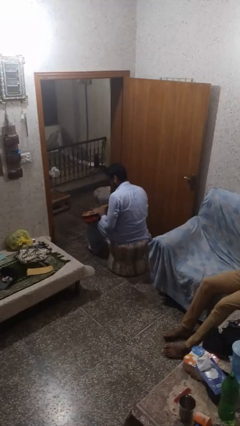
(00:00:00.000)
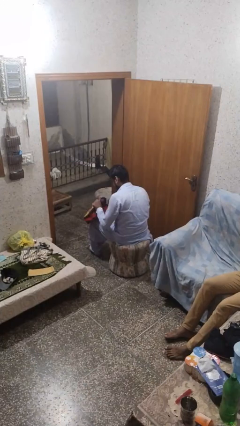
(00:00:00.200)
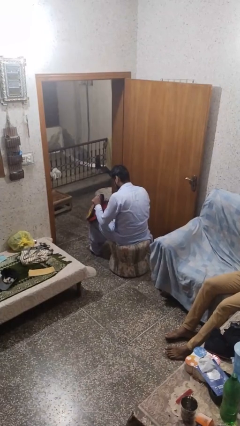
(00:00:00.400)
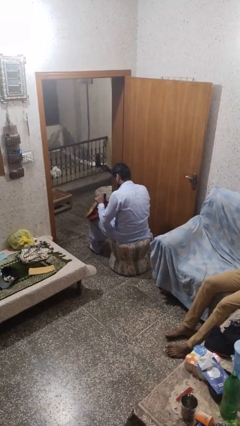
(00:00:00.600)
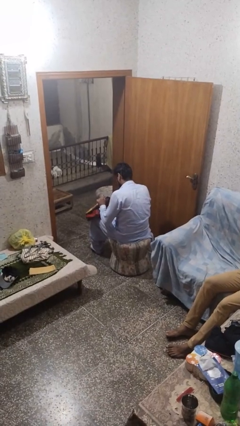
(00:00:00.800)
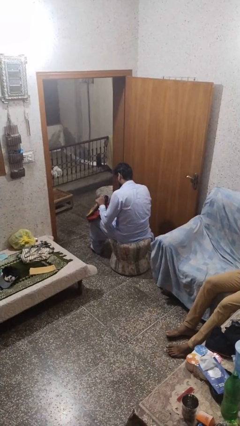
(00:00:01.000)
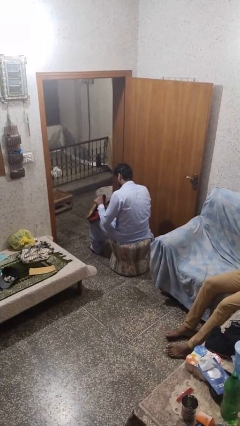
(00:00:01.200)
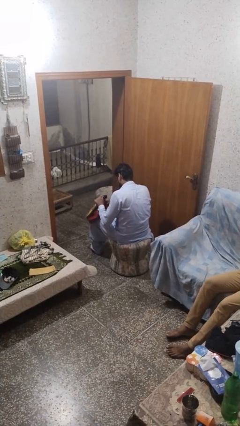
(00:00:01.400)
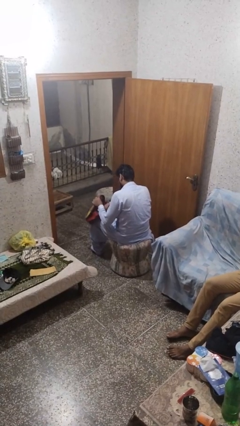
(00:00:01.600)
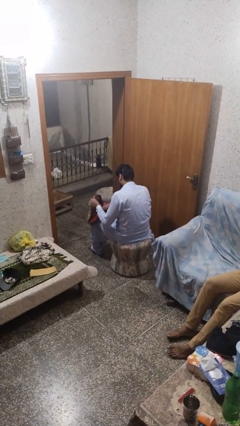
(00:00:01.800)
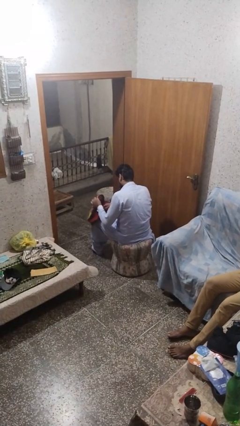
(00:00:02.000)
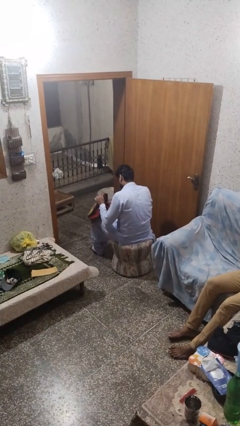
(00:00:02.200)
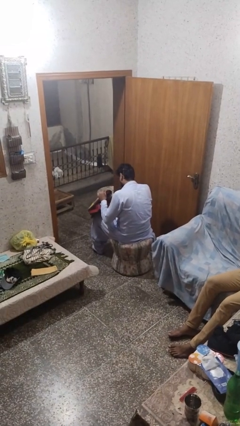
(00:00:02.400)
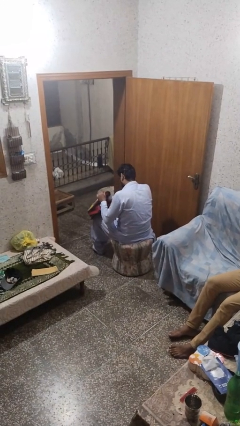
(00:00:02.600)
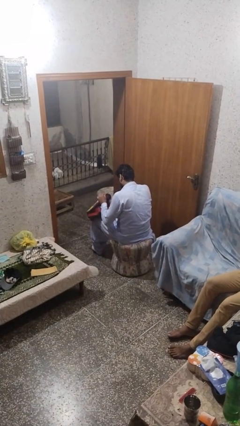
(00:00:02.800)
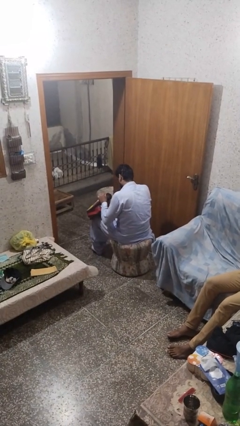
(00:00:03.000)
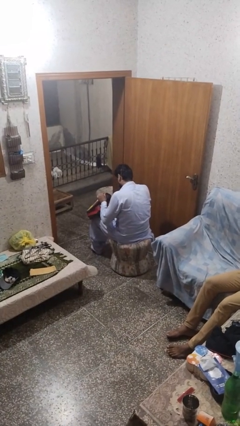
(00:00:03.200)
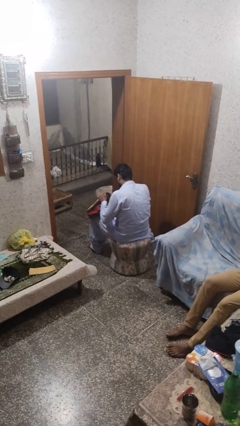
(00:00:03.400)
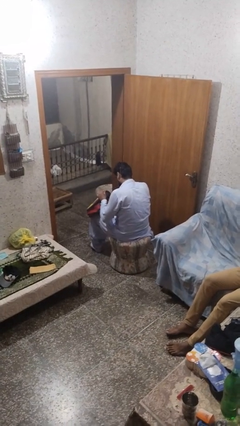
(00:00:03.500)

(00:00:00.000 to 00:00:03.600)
person searches in backpack

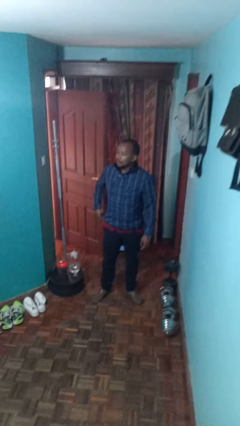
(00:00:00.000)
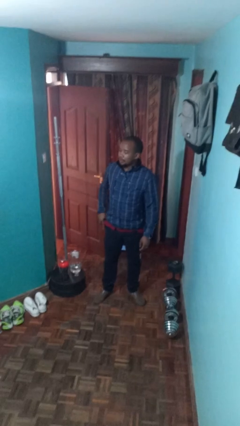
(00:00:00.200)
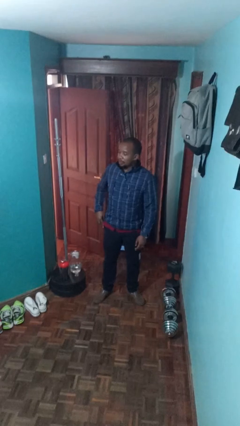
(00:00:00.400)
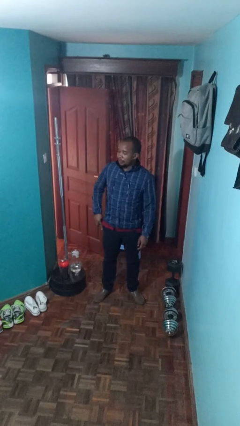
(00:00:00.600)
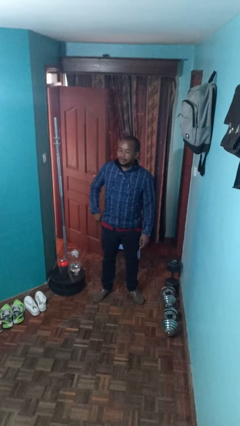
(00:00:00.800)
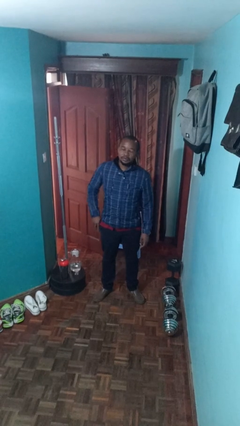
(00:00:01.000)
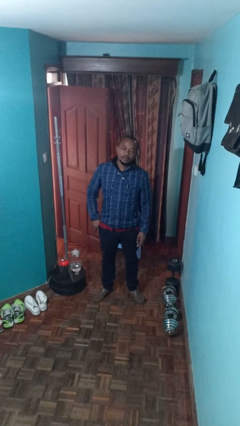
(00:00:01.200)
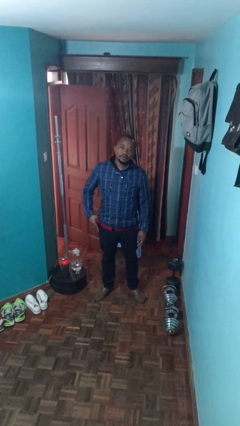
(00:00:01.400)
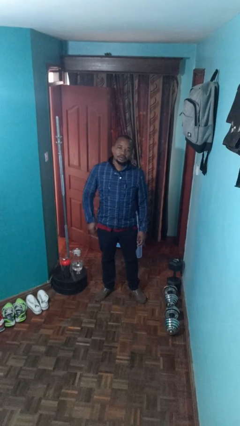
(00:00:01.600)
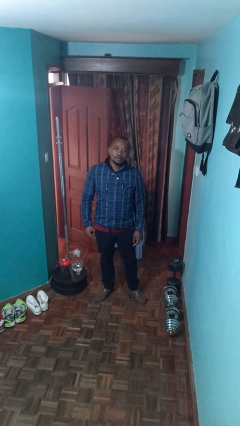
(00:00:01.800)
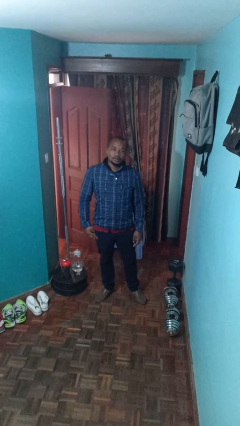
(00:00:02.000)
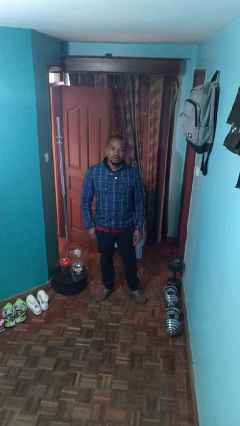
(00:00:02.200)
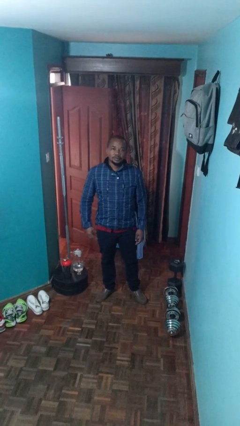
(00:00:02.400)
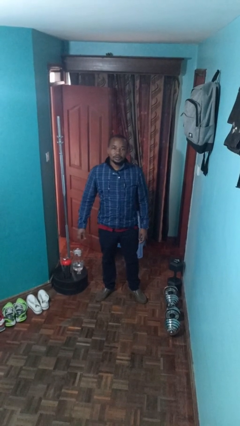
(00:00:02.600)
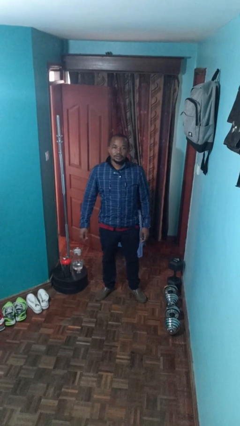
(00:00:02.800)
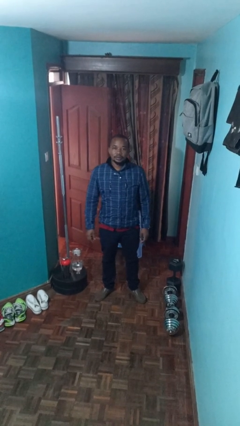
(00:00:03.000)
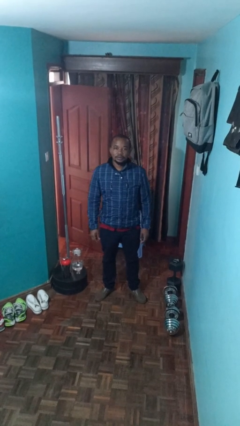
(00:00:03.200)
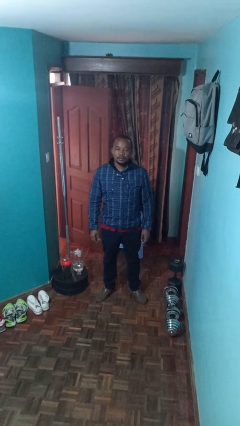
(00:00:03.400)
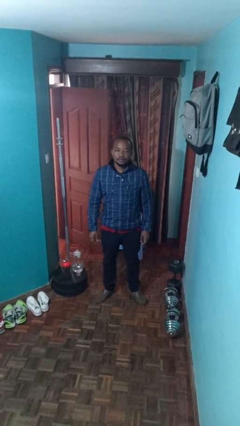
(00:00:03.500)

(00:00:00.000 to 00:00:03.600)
person puts phone into pocket

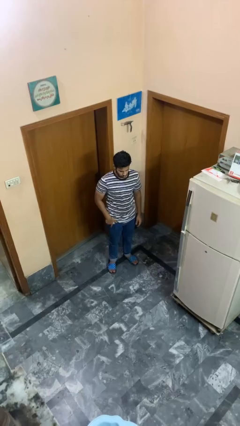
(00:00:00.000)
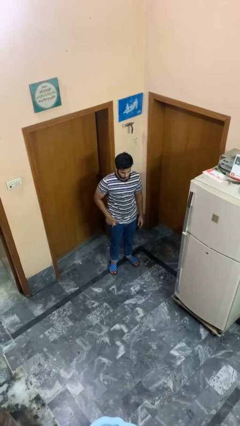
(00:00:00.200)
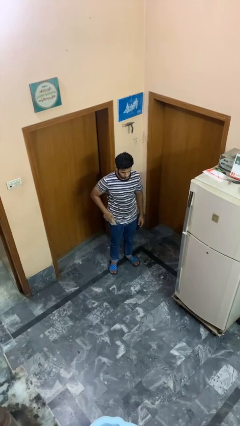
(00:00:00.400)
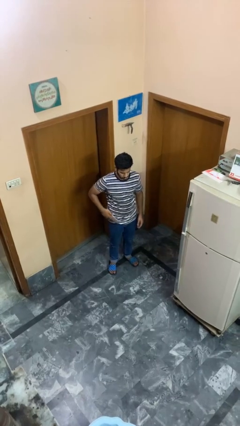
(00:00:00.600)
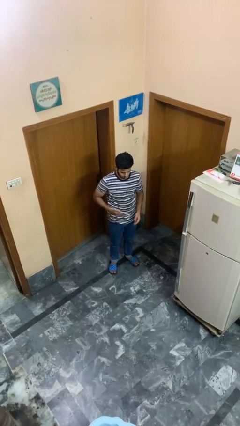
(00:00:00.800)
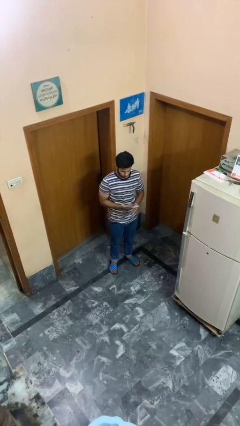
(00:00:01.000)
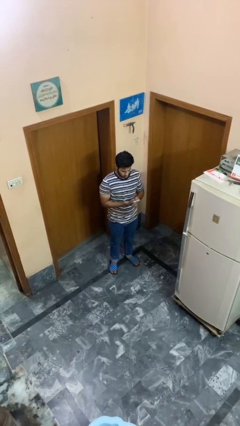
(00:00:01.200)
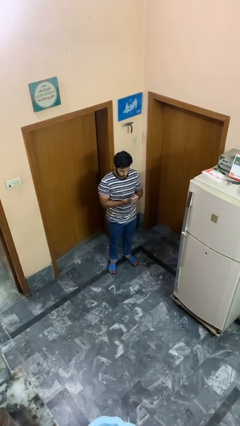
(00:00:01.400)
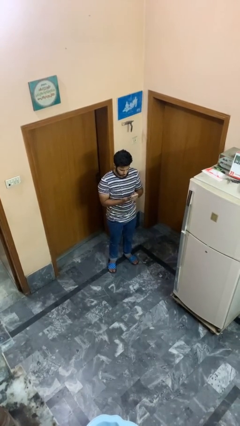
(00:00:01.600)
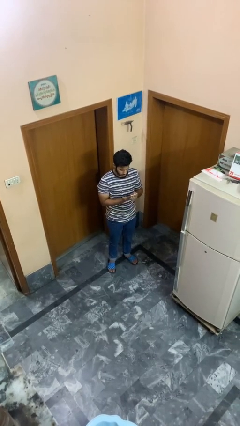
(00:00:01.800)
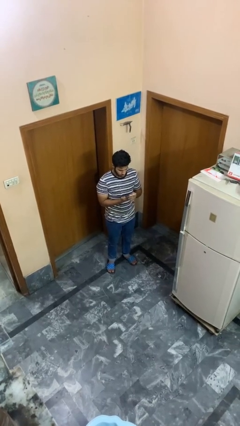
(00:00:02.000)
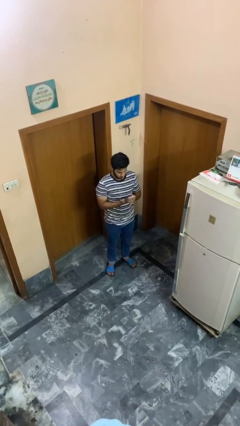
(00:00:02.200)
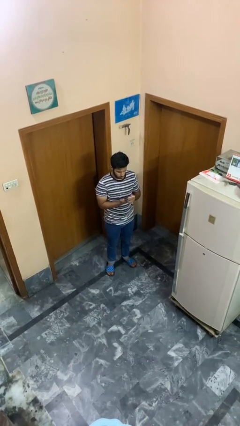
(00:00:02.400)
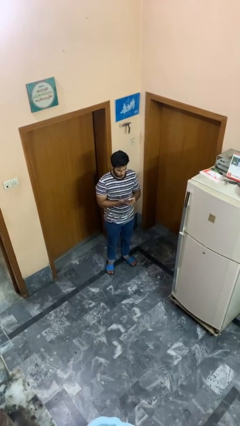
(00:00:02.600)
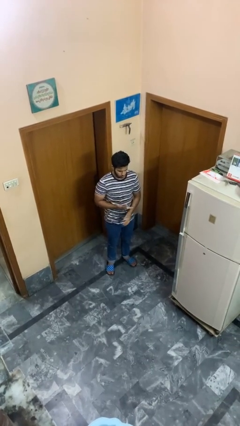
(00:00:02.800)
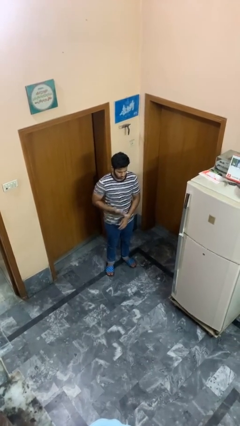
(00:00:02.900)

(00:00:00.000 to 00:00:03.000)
person takes phone from pocket

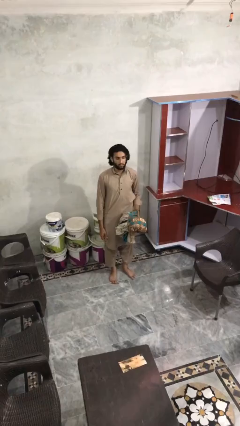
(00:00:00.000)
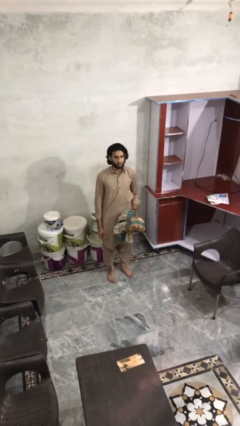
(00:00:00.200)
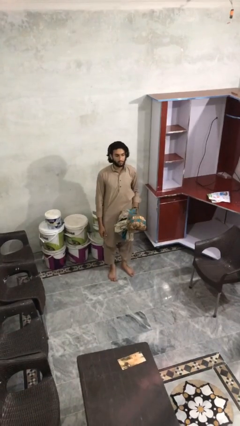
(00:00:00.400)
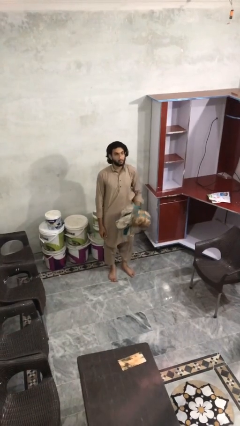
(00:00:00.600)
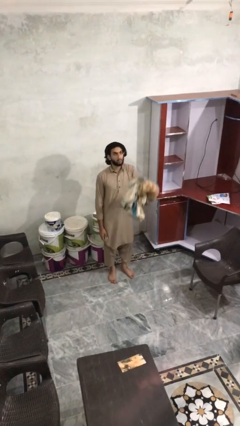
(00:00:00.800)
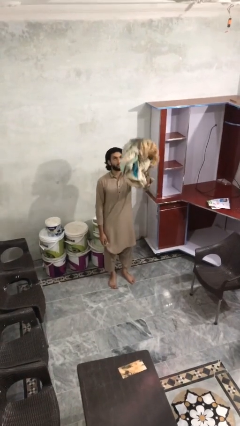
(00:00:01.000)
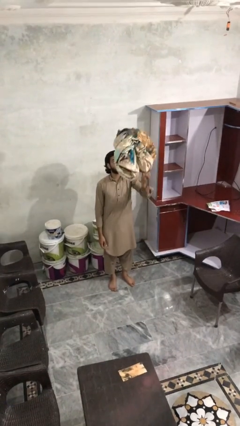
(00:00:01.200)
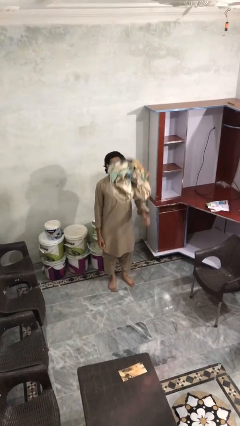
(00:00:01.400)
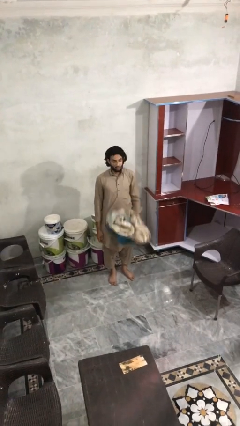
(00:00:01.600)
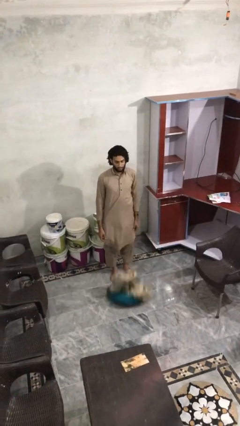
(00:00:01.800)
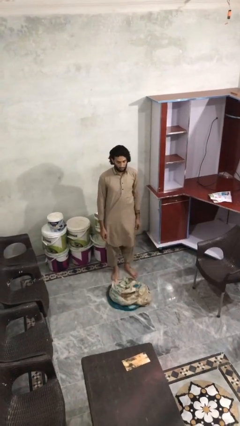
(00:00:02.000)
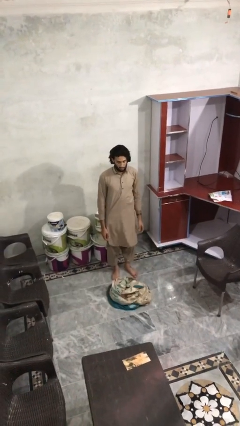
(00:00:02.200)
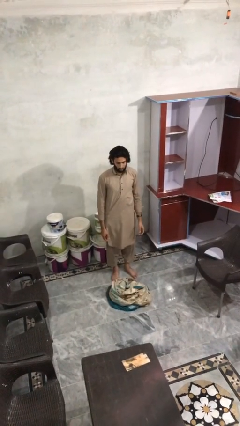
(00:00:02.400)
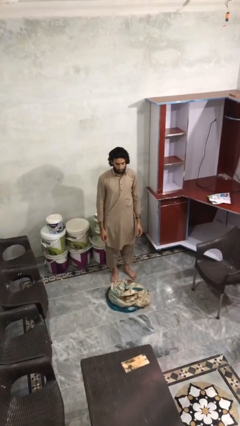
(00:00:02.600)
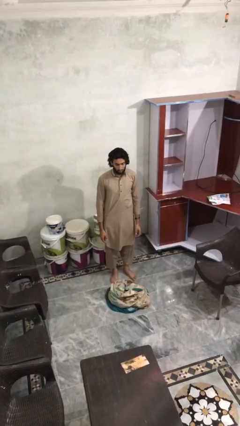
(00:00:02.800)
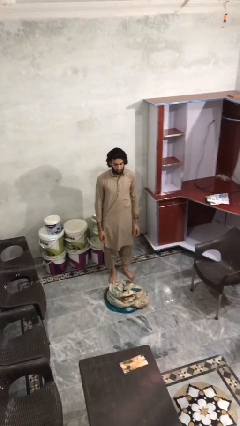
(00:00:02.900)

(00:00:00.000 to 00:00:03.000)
person throws object into air

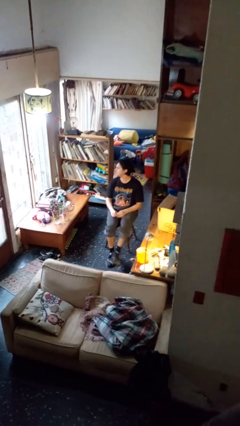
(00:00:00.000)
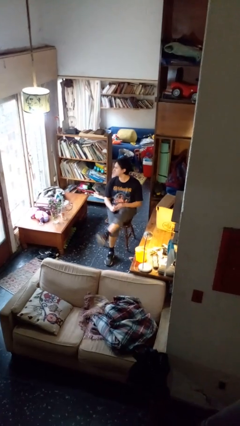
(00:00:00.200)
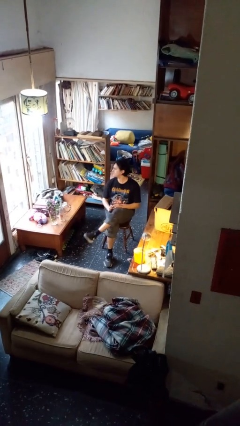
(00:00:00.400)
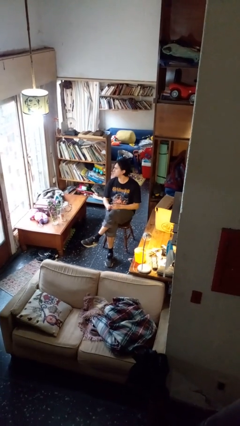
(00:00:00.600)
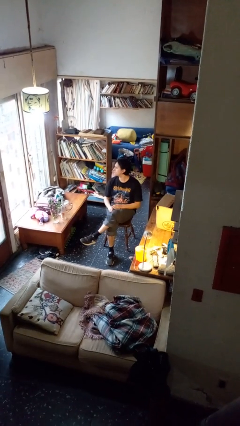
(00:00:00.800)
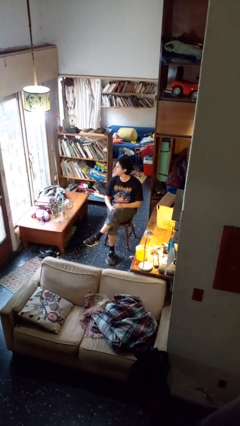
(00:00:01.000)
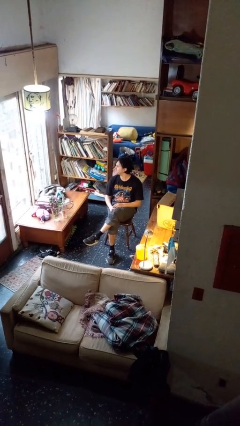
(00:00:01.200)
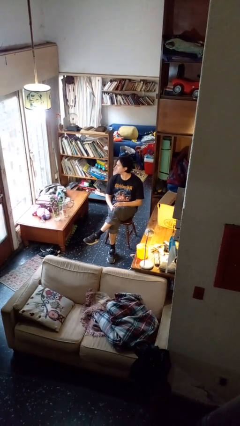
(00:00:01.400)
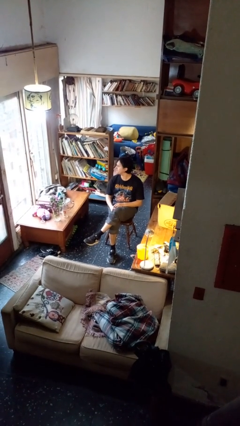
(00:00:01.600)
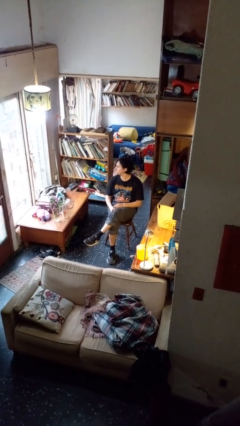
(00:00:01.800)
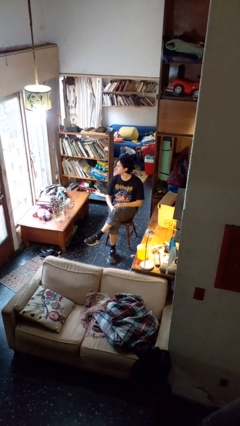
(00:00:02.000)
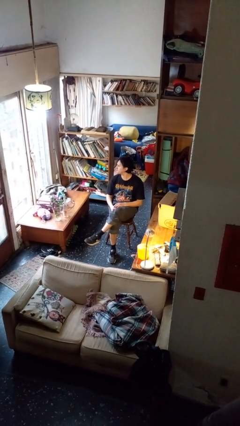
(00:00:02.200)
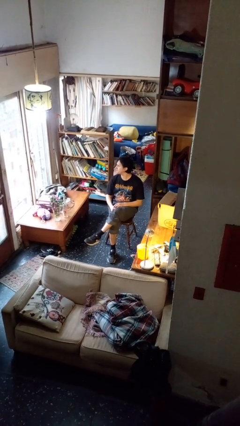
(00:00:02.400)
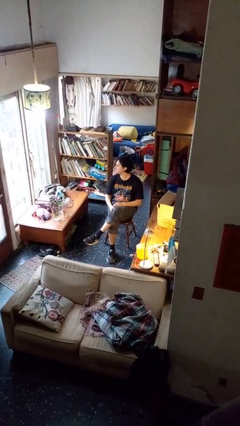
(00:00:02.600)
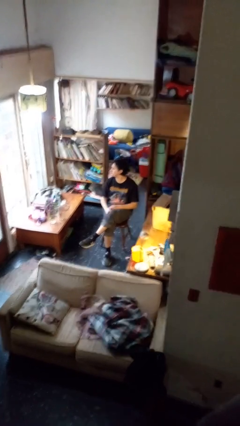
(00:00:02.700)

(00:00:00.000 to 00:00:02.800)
person crosses legs

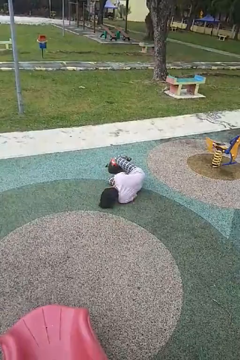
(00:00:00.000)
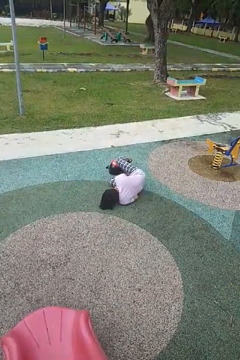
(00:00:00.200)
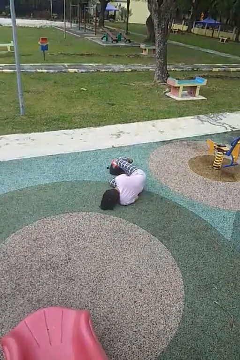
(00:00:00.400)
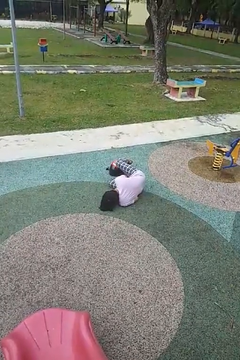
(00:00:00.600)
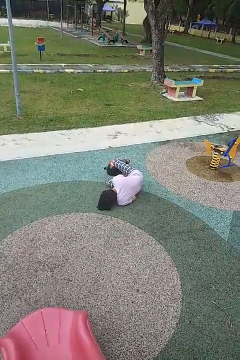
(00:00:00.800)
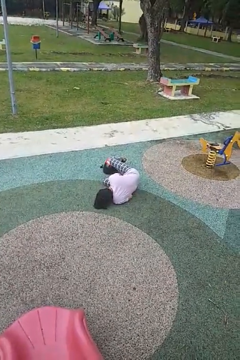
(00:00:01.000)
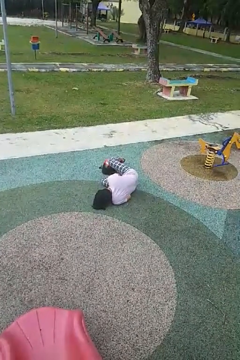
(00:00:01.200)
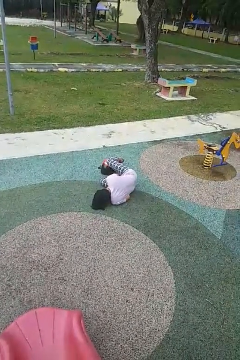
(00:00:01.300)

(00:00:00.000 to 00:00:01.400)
person lies down on floor
